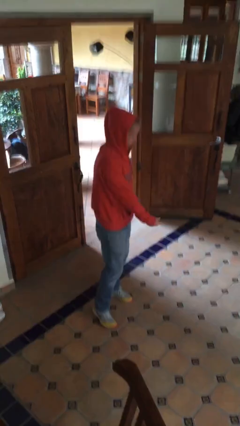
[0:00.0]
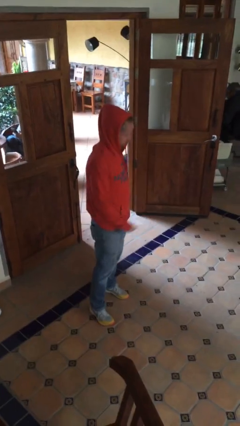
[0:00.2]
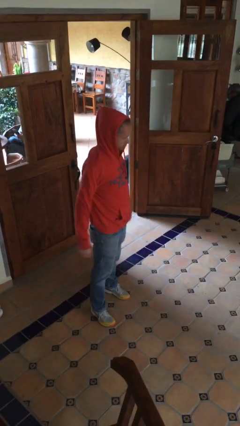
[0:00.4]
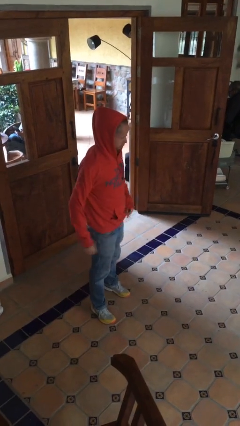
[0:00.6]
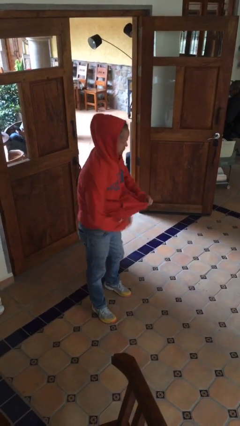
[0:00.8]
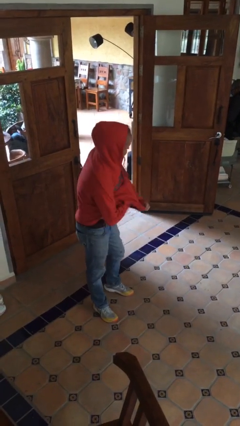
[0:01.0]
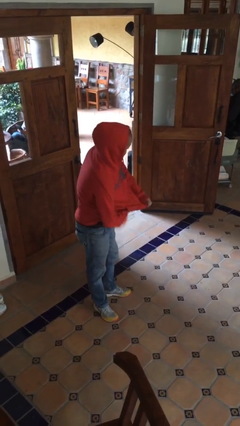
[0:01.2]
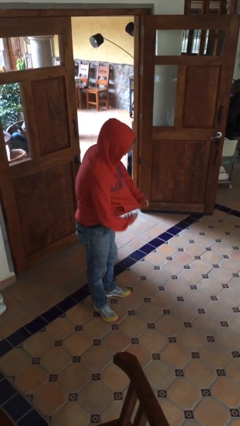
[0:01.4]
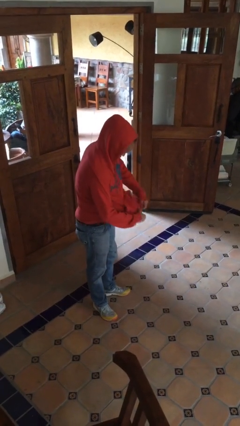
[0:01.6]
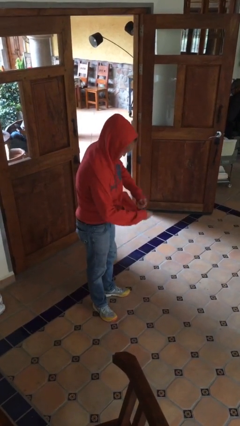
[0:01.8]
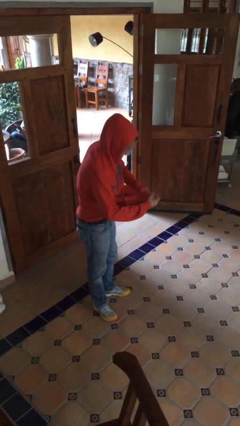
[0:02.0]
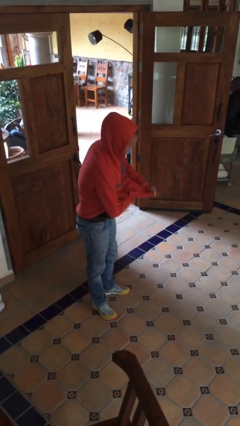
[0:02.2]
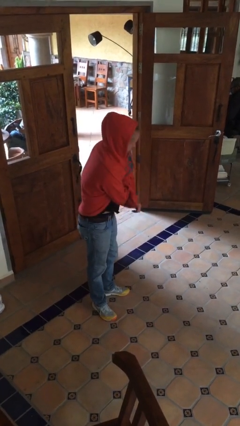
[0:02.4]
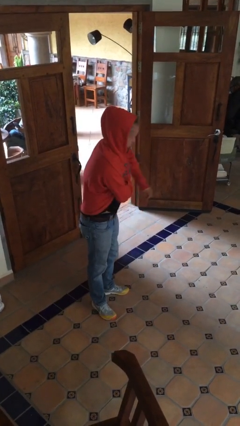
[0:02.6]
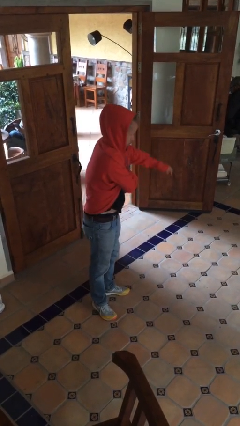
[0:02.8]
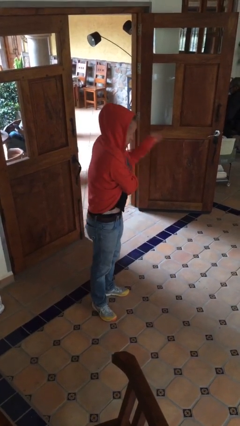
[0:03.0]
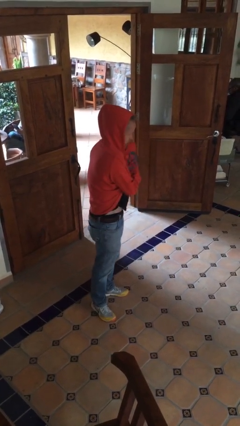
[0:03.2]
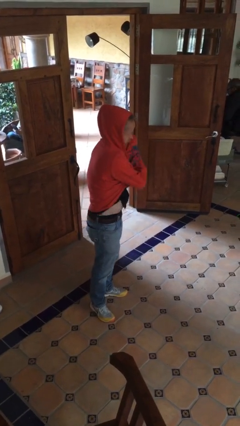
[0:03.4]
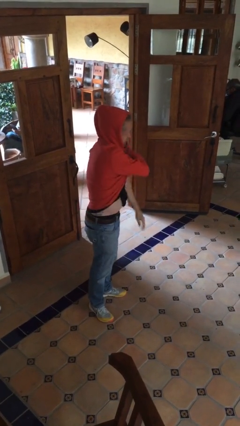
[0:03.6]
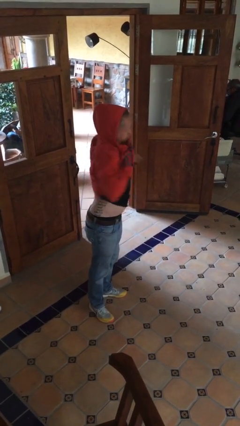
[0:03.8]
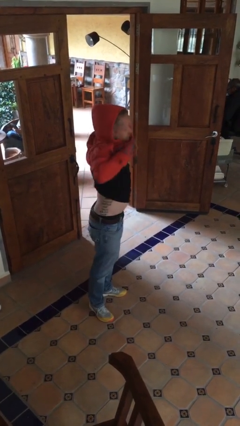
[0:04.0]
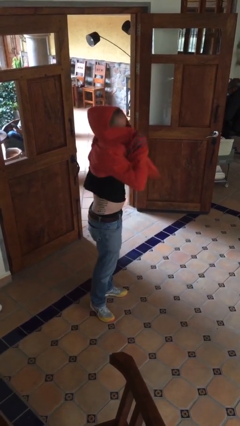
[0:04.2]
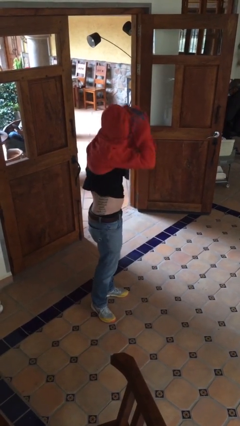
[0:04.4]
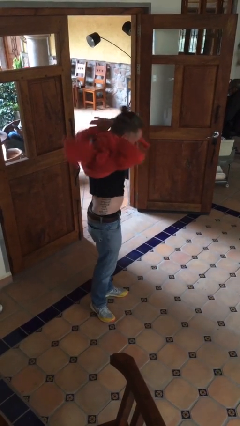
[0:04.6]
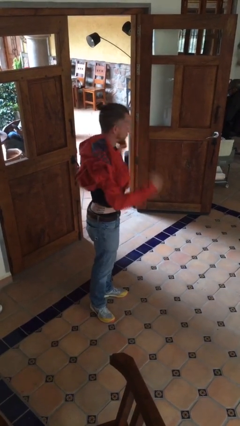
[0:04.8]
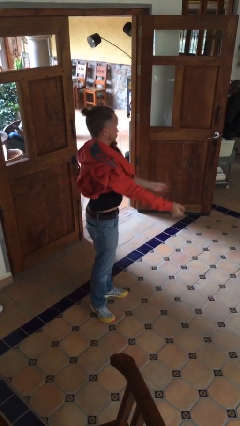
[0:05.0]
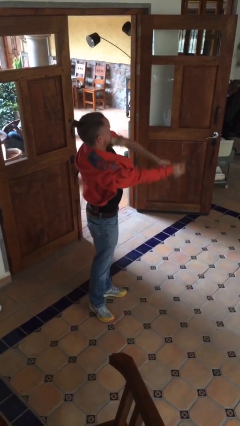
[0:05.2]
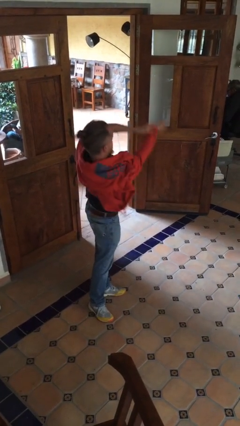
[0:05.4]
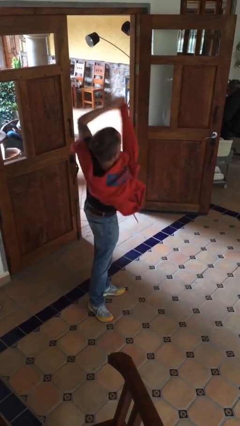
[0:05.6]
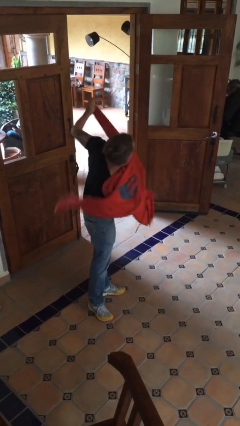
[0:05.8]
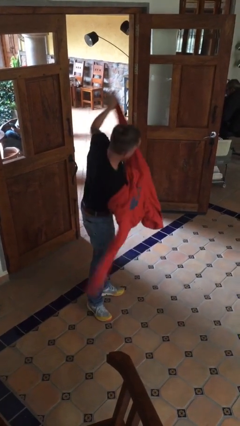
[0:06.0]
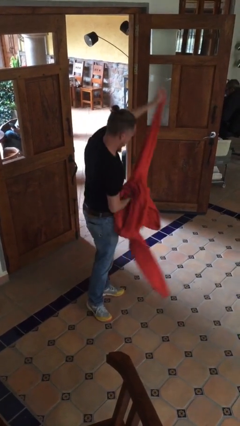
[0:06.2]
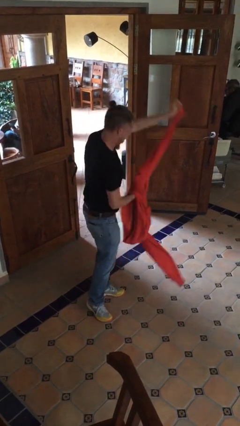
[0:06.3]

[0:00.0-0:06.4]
person takes off hoodie

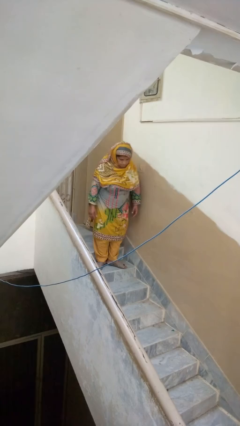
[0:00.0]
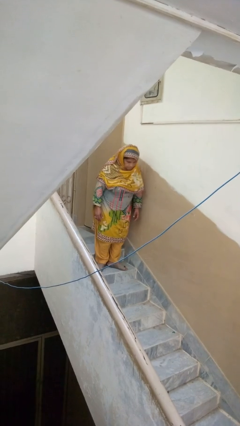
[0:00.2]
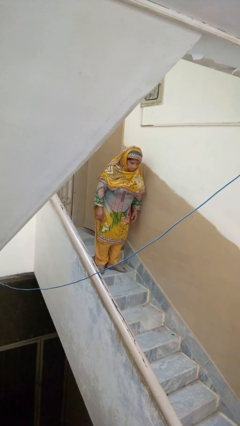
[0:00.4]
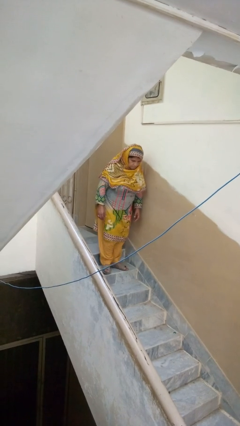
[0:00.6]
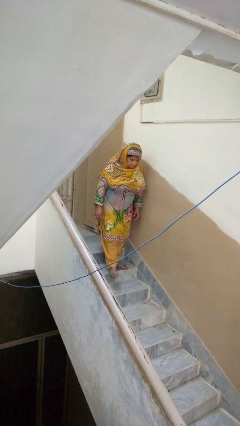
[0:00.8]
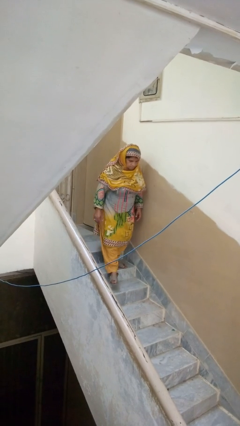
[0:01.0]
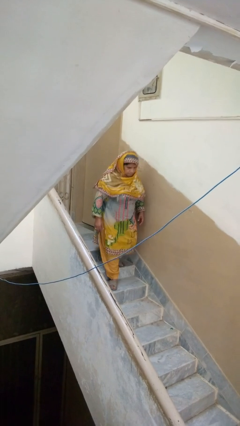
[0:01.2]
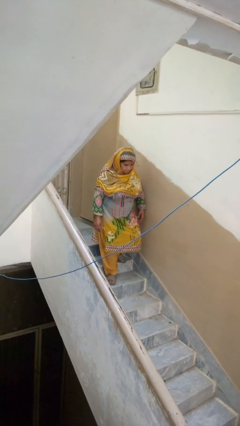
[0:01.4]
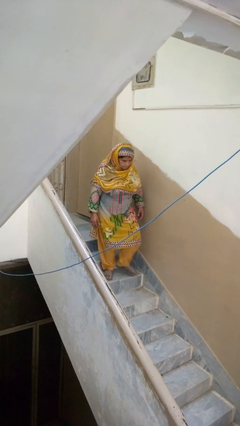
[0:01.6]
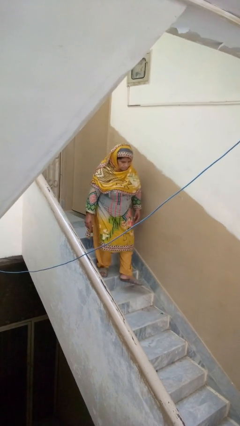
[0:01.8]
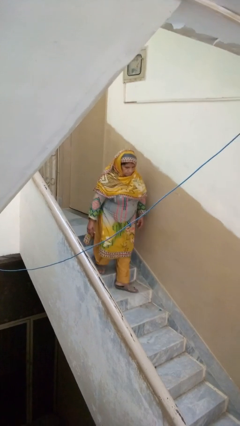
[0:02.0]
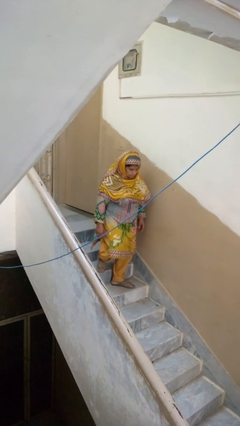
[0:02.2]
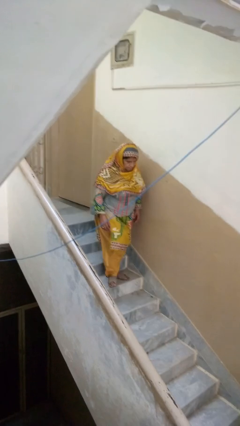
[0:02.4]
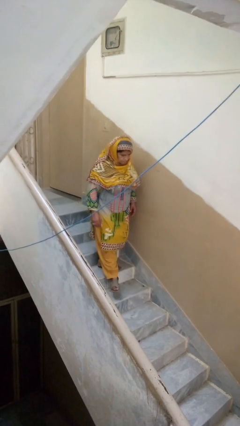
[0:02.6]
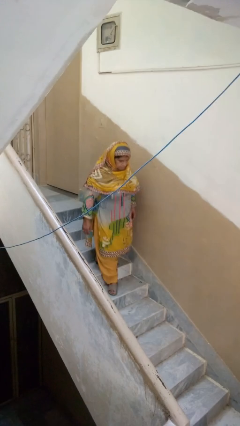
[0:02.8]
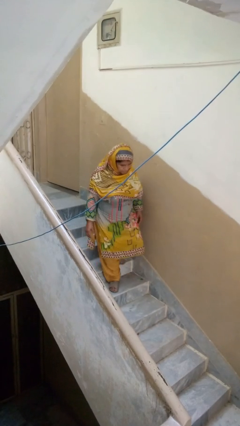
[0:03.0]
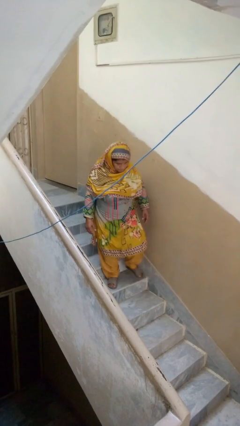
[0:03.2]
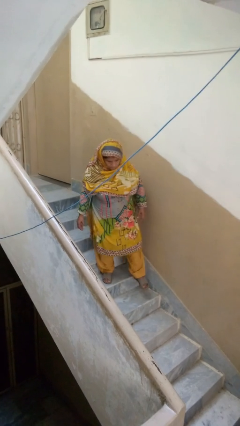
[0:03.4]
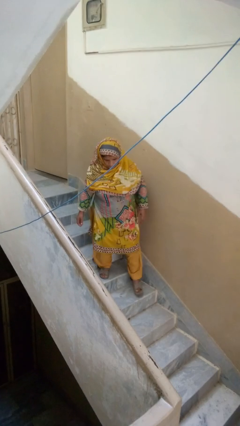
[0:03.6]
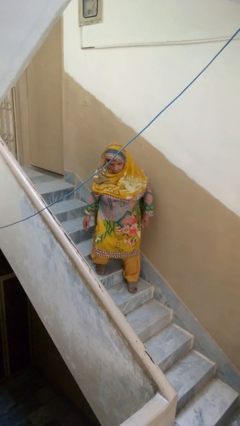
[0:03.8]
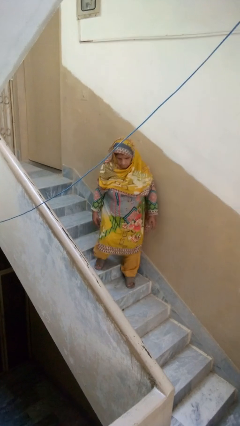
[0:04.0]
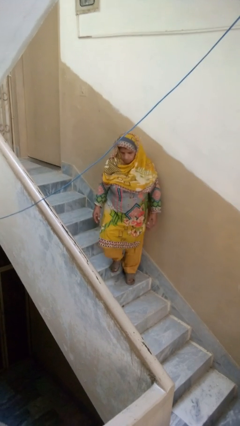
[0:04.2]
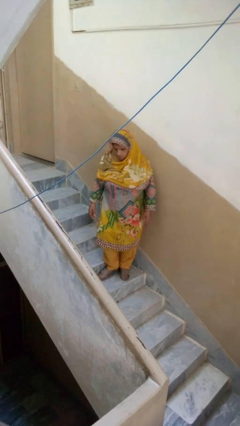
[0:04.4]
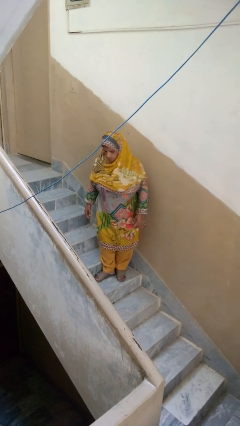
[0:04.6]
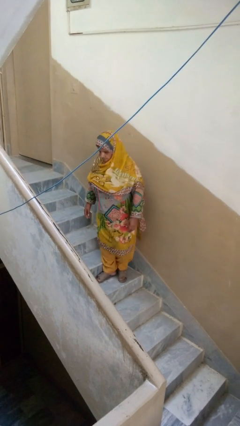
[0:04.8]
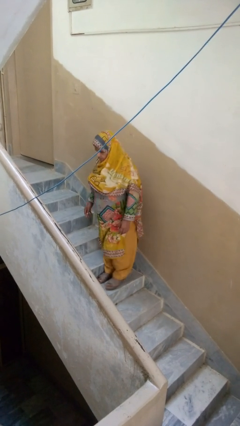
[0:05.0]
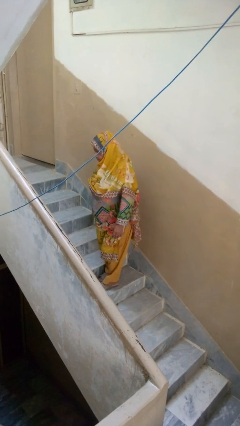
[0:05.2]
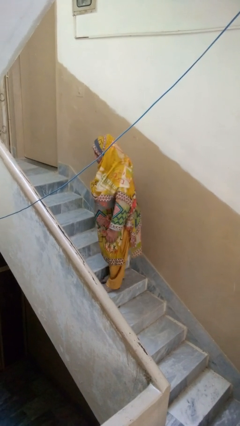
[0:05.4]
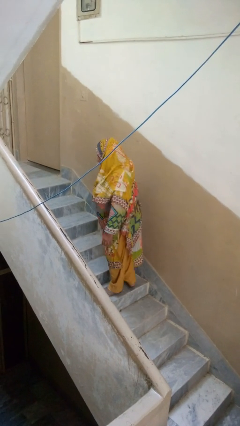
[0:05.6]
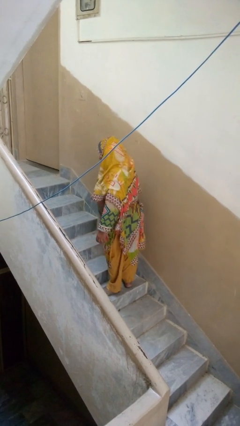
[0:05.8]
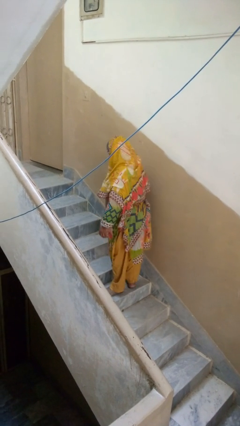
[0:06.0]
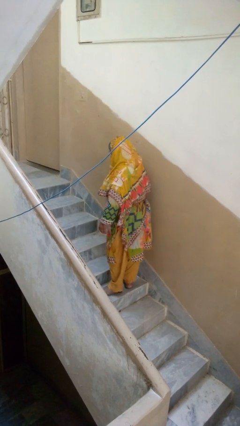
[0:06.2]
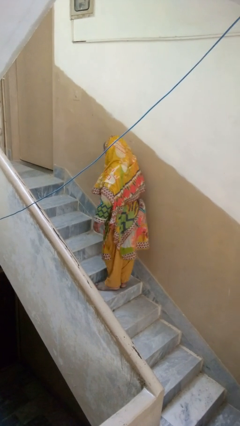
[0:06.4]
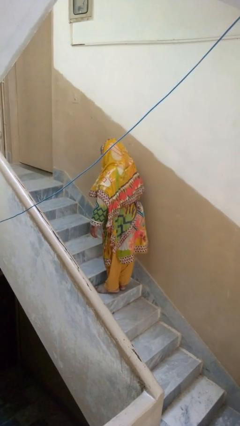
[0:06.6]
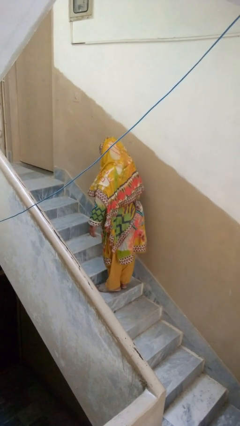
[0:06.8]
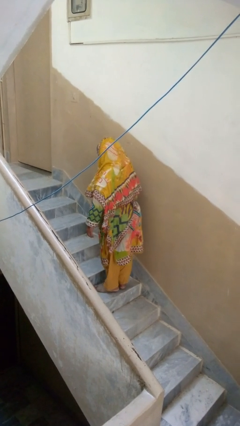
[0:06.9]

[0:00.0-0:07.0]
person climbs down stairs

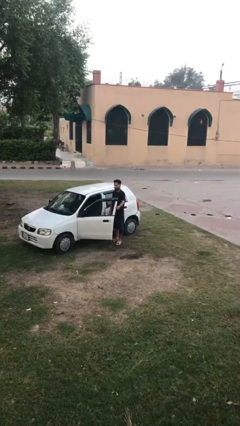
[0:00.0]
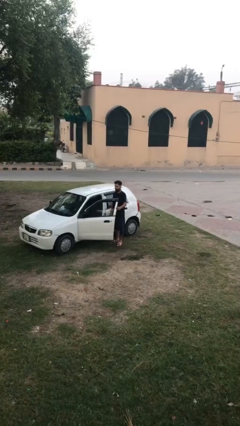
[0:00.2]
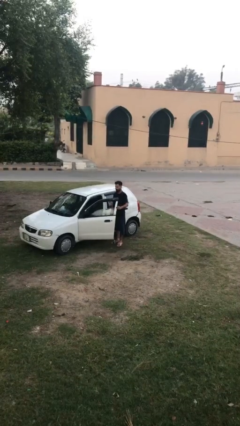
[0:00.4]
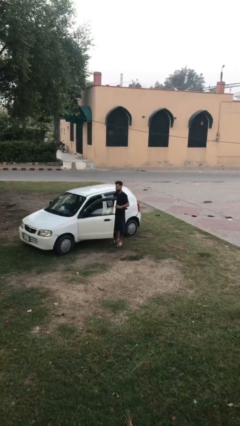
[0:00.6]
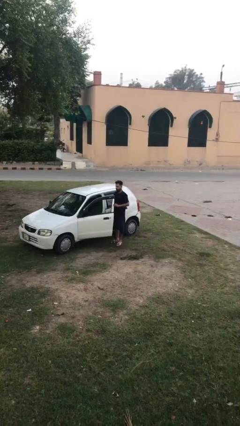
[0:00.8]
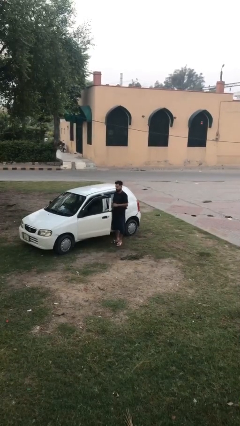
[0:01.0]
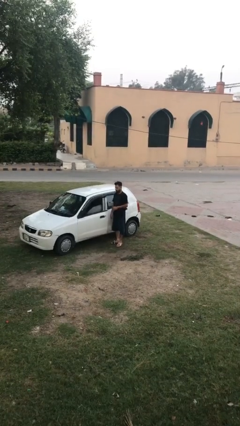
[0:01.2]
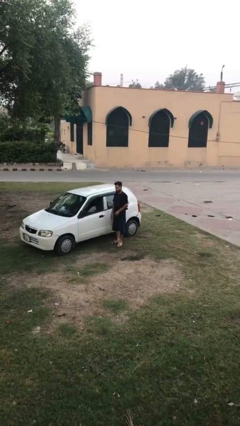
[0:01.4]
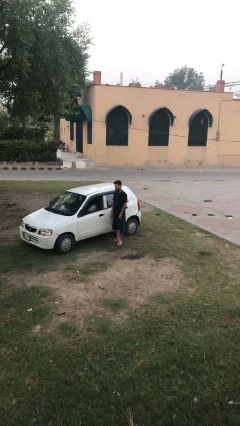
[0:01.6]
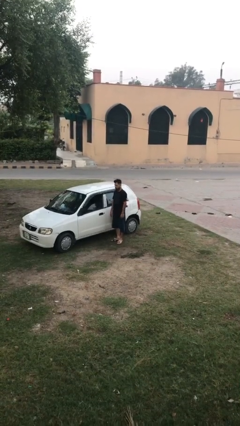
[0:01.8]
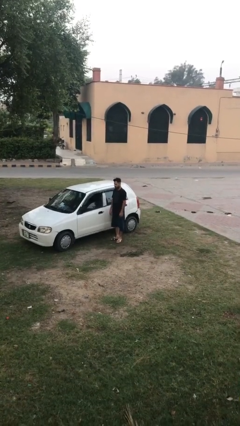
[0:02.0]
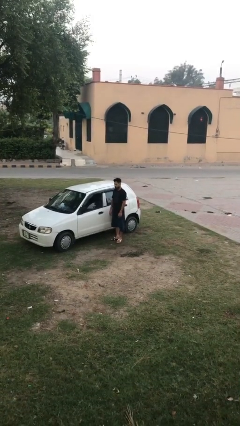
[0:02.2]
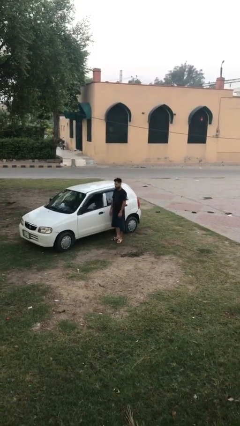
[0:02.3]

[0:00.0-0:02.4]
person closes car door

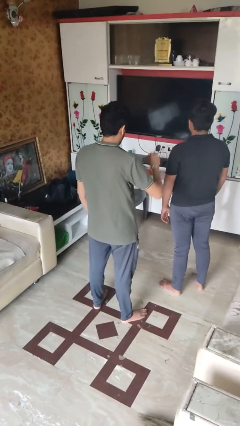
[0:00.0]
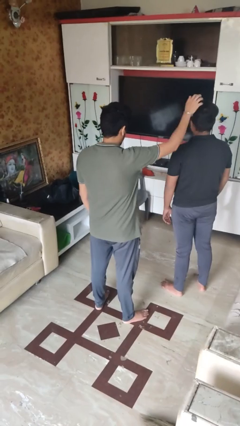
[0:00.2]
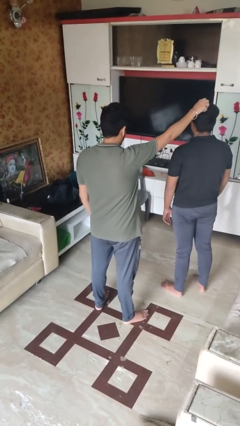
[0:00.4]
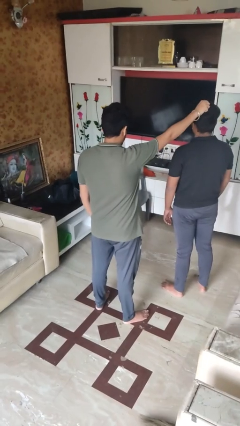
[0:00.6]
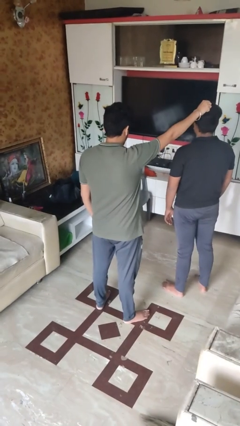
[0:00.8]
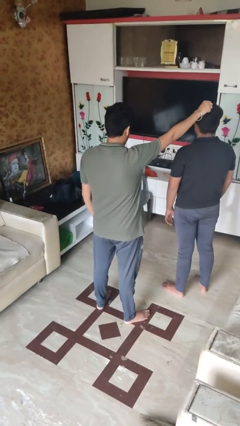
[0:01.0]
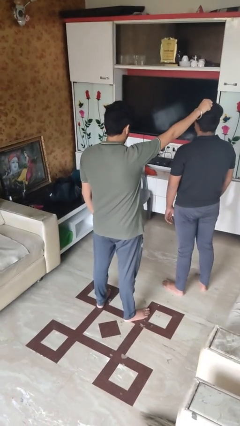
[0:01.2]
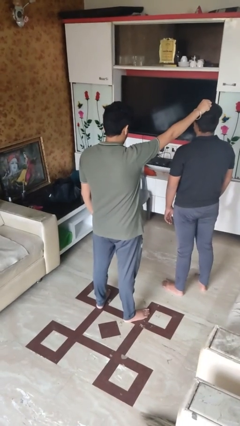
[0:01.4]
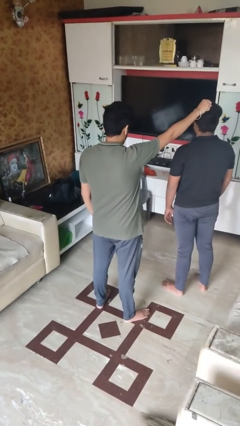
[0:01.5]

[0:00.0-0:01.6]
person grabs person by hair

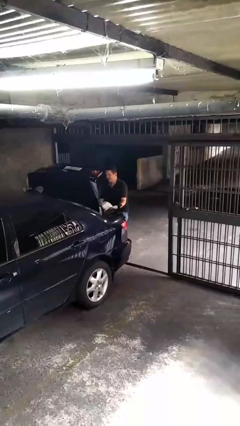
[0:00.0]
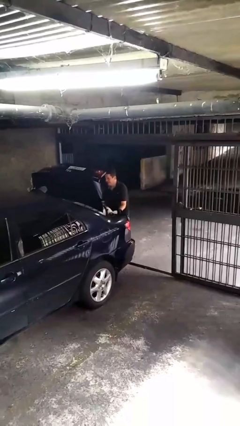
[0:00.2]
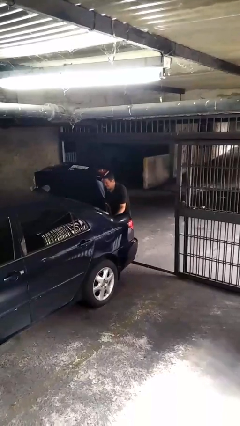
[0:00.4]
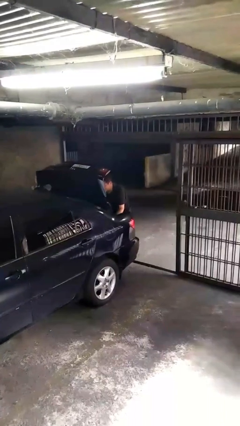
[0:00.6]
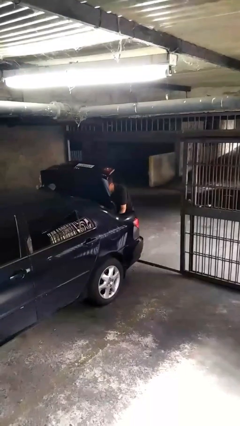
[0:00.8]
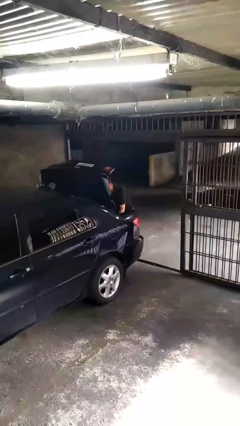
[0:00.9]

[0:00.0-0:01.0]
person loads car
